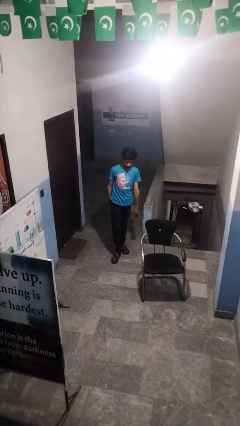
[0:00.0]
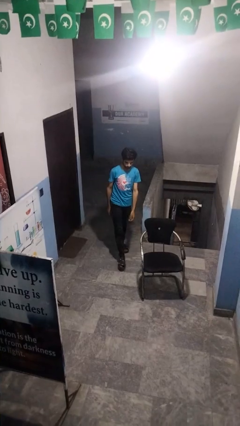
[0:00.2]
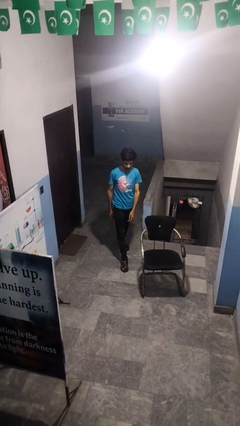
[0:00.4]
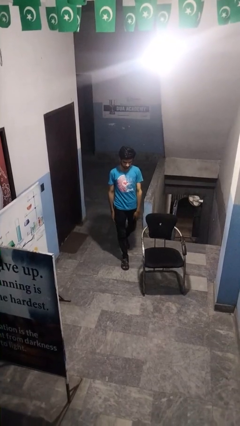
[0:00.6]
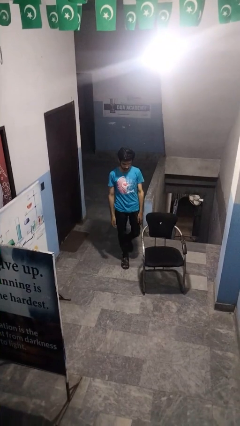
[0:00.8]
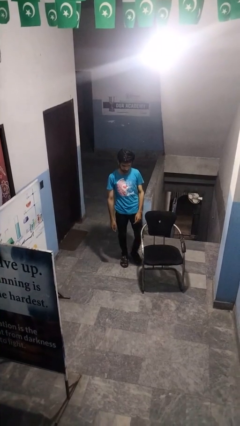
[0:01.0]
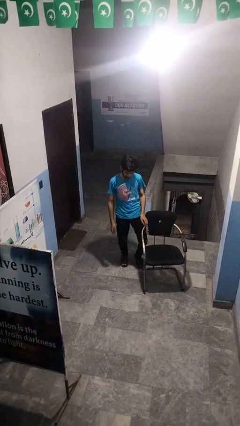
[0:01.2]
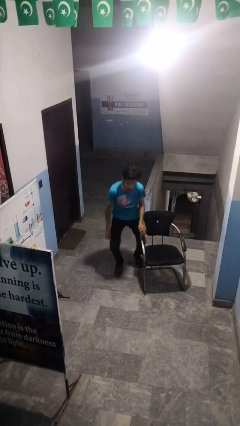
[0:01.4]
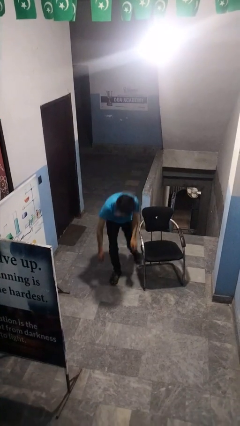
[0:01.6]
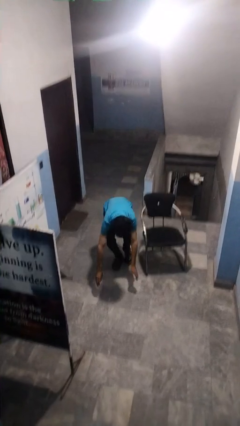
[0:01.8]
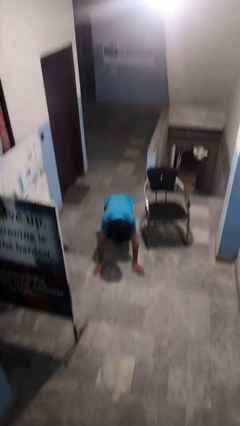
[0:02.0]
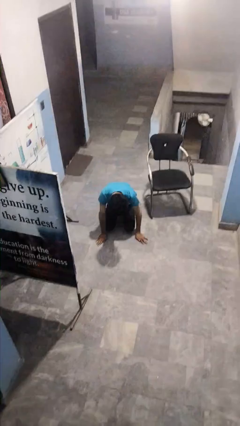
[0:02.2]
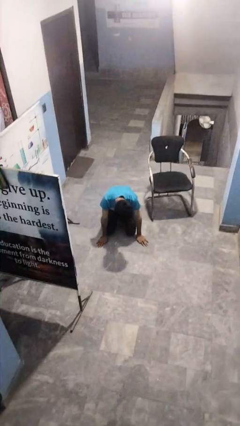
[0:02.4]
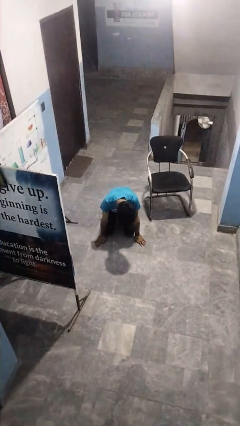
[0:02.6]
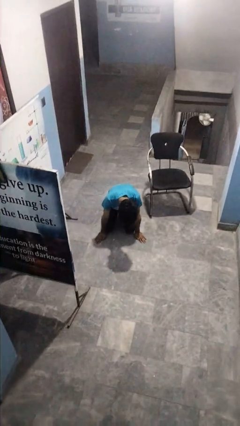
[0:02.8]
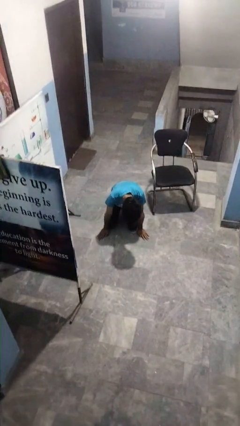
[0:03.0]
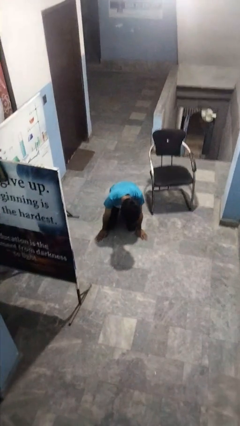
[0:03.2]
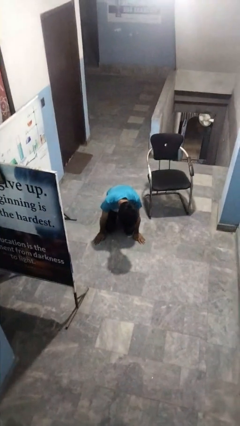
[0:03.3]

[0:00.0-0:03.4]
person trips on object on floor

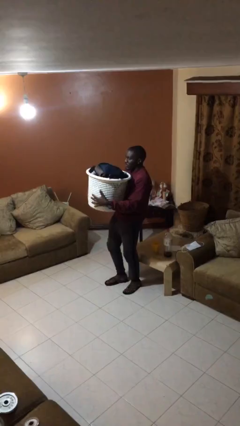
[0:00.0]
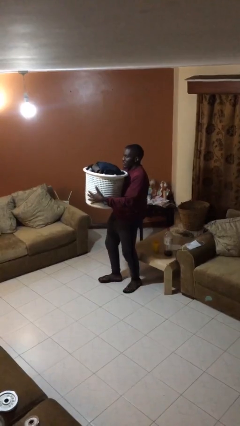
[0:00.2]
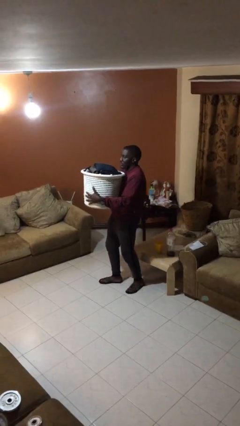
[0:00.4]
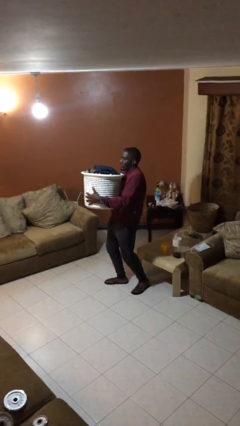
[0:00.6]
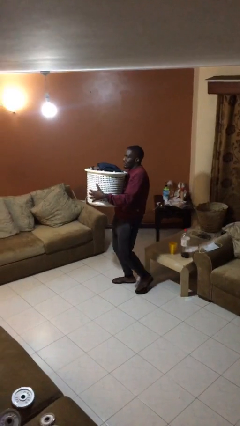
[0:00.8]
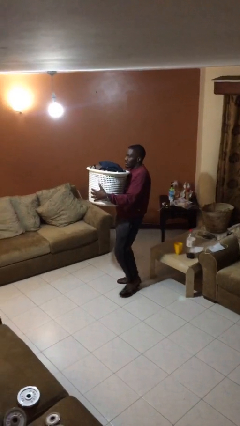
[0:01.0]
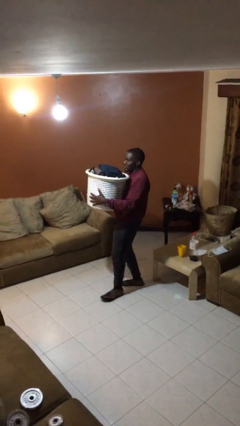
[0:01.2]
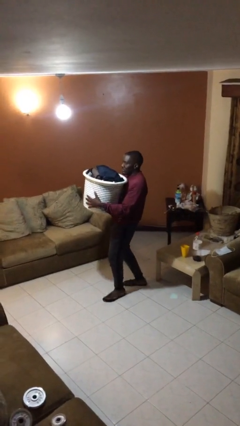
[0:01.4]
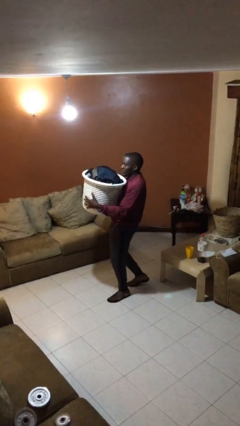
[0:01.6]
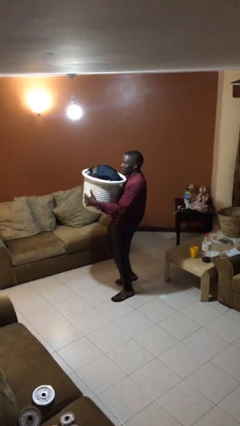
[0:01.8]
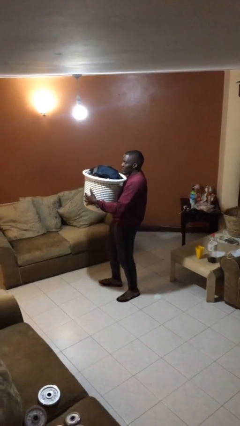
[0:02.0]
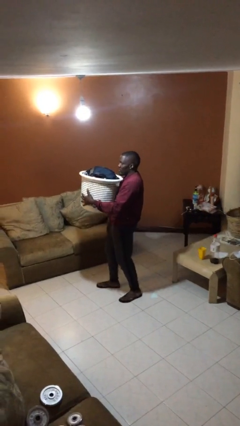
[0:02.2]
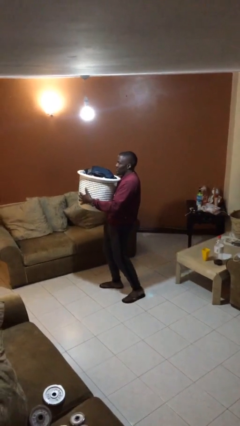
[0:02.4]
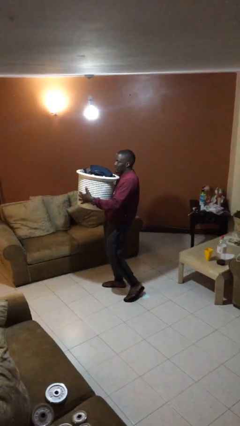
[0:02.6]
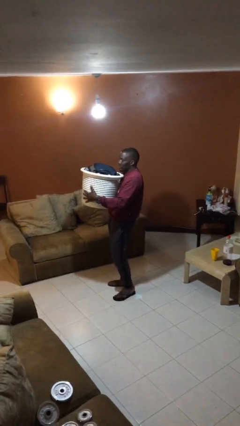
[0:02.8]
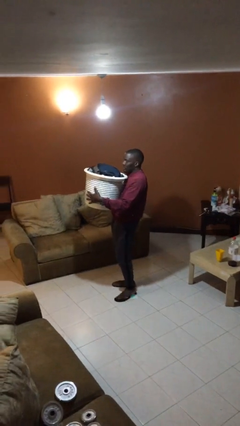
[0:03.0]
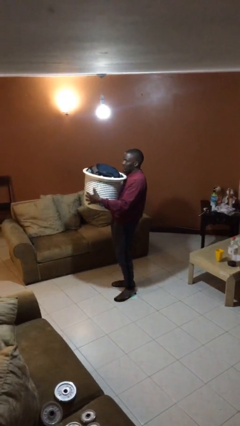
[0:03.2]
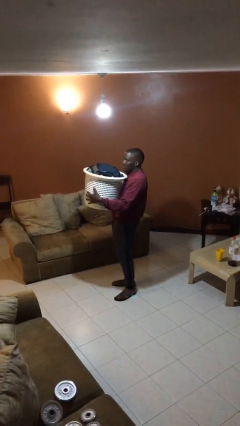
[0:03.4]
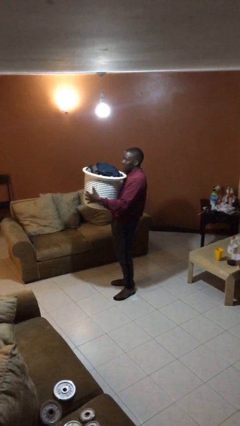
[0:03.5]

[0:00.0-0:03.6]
person carries laundry basket

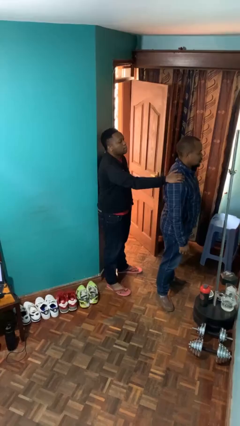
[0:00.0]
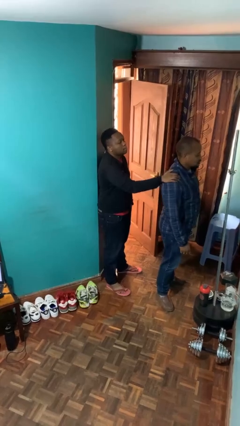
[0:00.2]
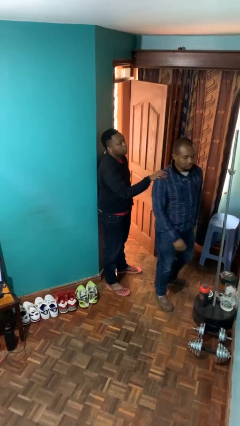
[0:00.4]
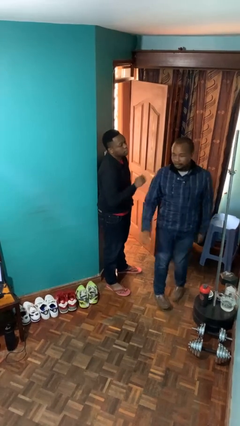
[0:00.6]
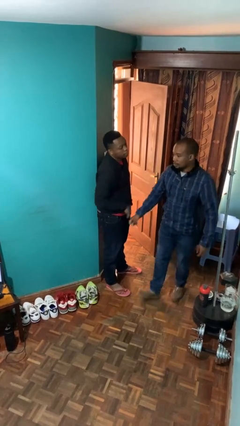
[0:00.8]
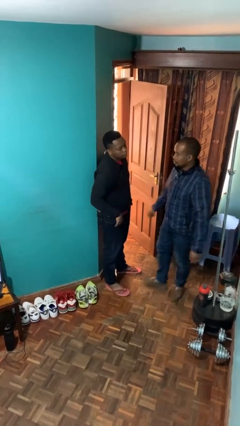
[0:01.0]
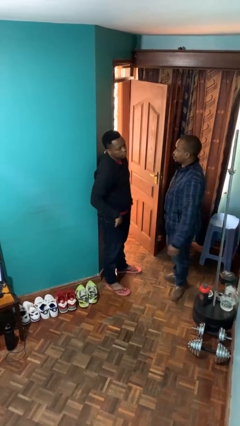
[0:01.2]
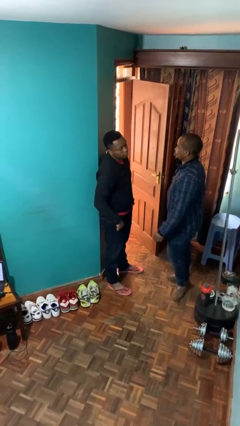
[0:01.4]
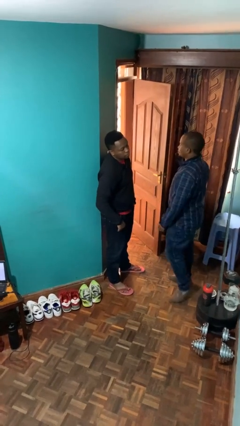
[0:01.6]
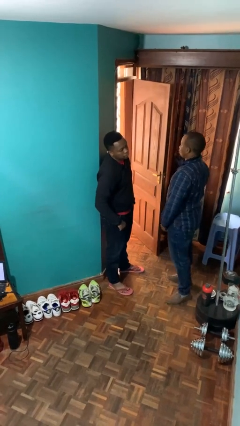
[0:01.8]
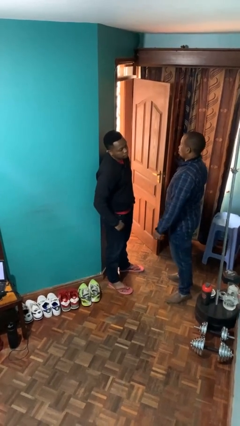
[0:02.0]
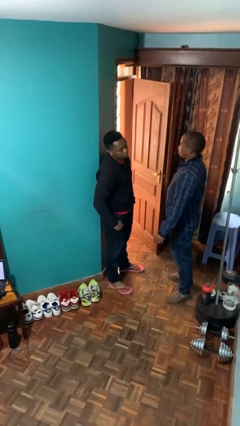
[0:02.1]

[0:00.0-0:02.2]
person spins person around

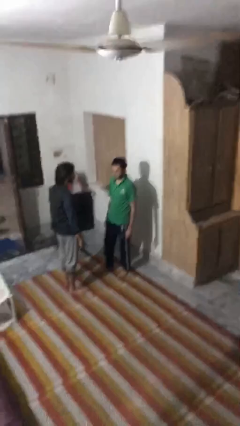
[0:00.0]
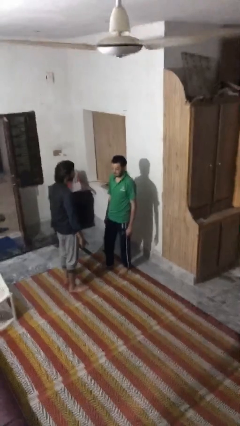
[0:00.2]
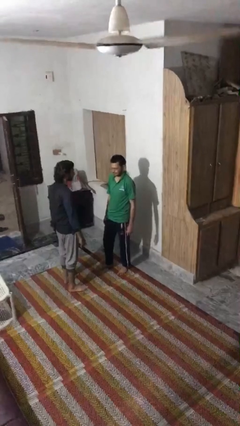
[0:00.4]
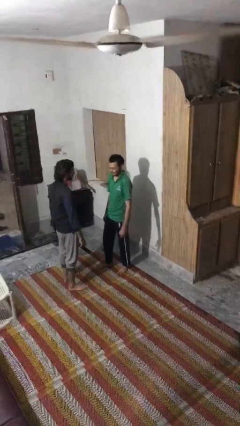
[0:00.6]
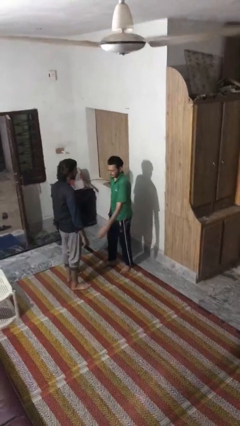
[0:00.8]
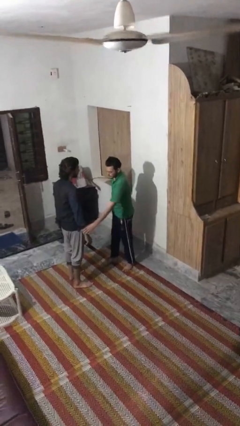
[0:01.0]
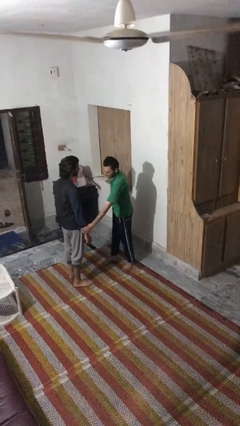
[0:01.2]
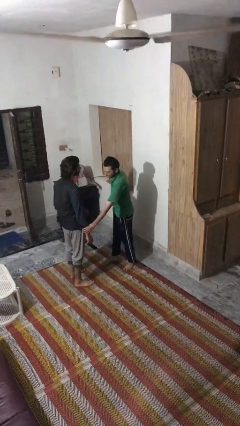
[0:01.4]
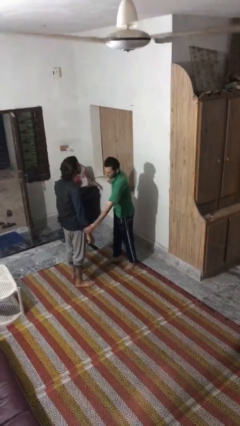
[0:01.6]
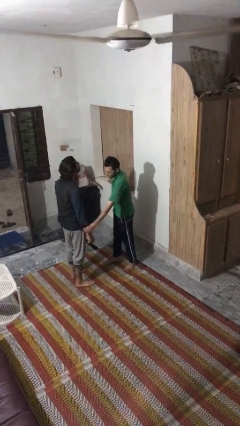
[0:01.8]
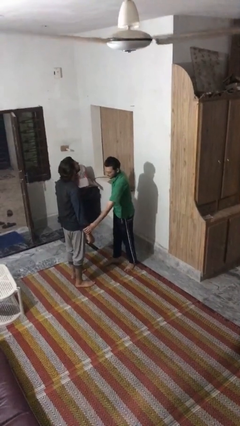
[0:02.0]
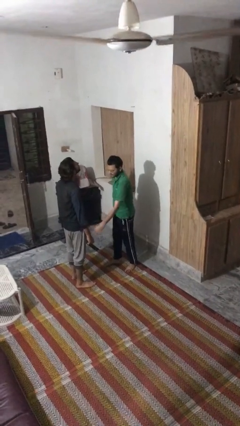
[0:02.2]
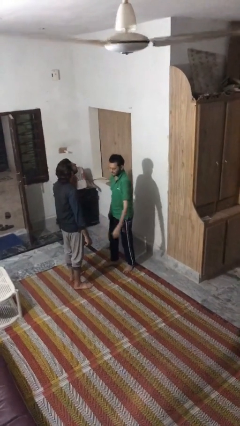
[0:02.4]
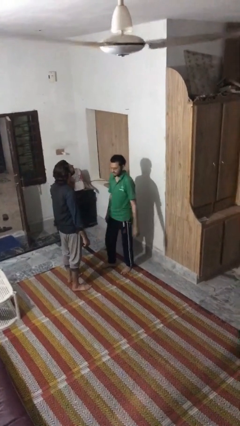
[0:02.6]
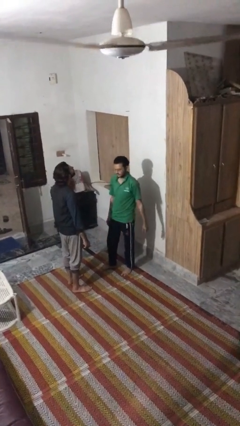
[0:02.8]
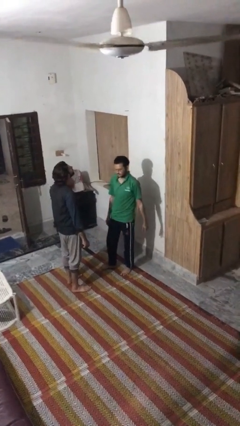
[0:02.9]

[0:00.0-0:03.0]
person grabs person by forearm

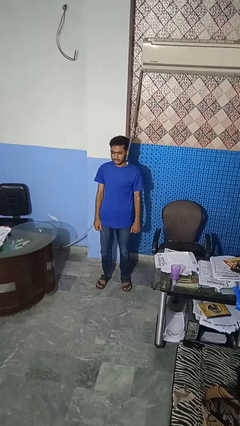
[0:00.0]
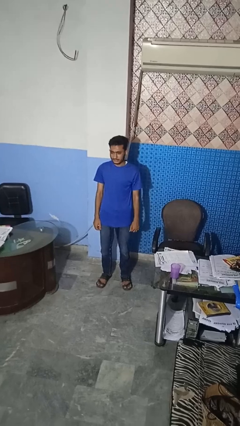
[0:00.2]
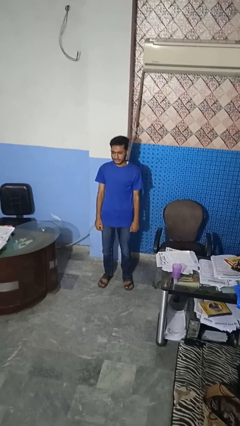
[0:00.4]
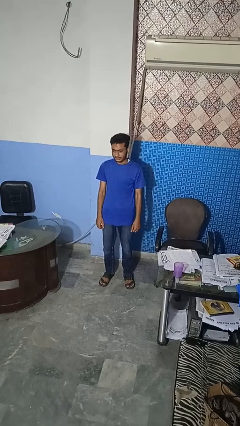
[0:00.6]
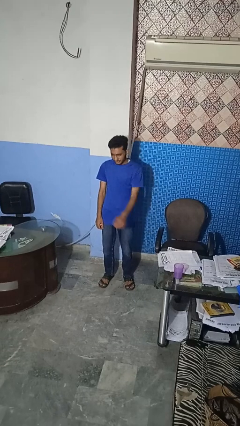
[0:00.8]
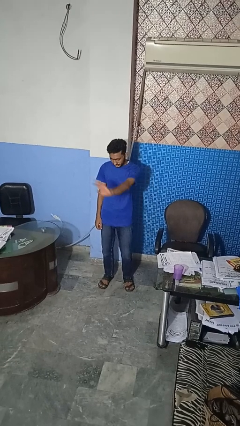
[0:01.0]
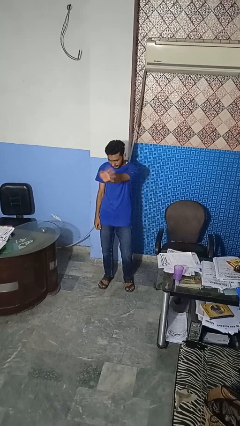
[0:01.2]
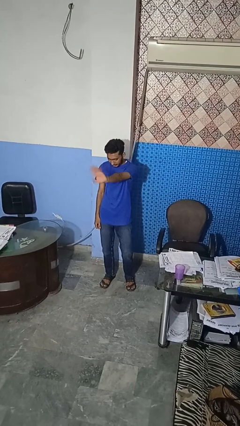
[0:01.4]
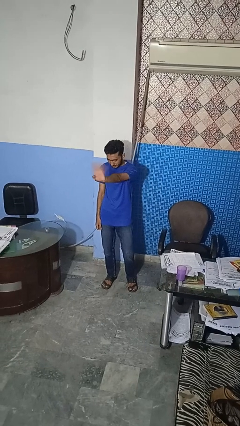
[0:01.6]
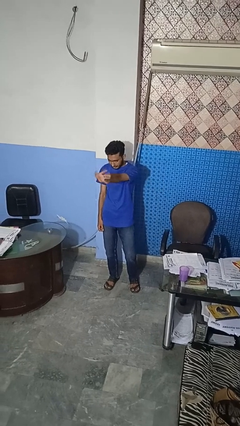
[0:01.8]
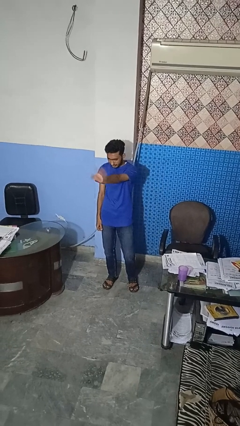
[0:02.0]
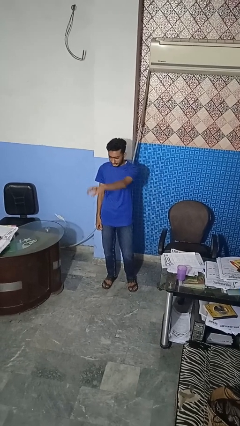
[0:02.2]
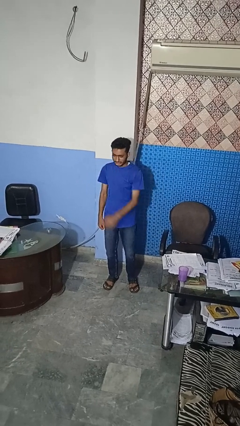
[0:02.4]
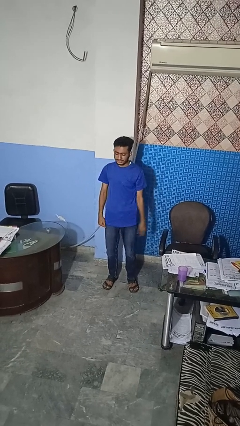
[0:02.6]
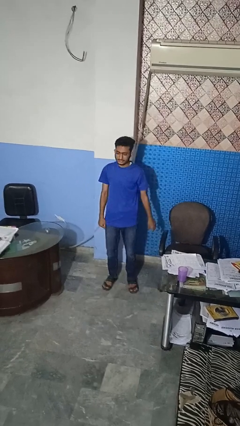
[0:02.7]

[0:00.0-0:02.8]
person waves at person

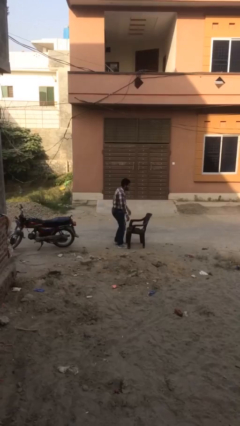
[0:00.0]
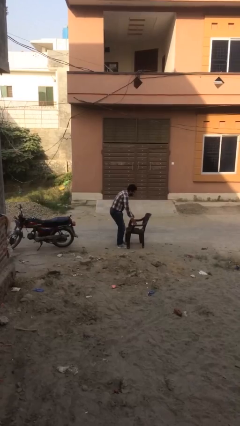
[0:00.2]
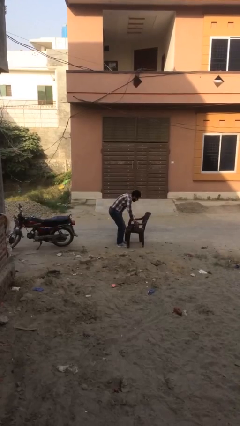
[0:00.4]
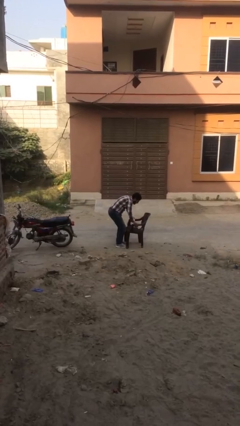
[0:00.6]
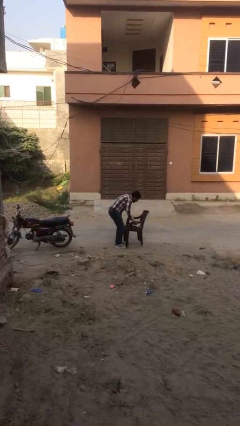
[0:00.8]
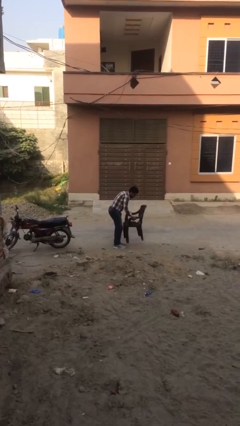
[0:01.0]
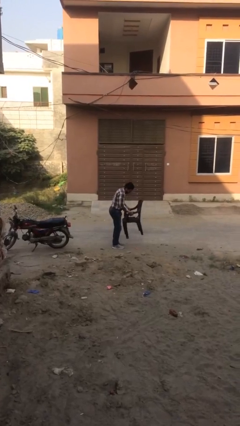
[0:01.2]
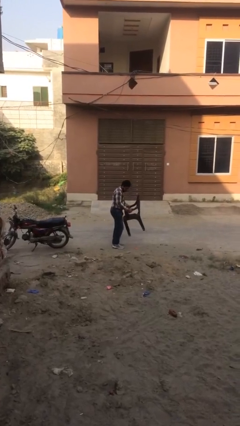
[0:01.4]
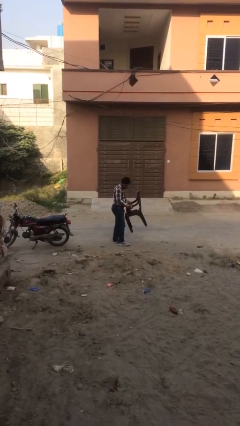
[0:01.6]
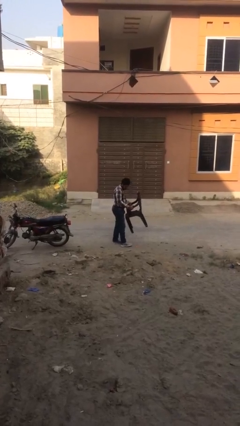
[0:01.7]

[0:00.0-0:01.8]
person picks up object from floor
